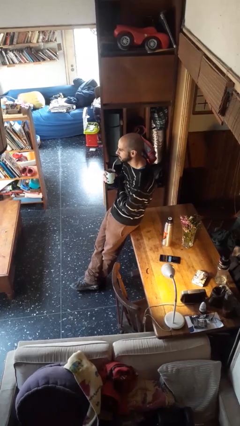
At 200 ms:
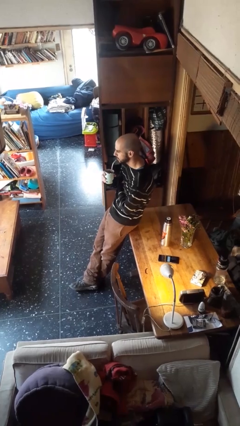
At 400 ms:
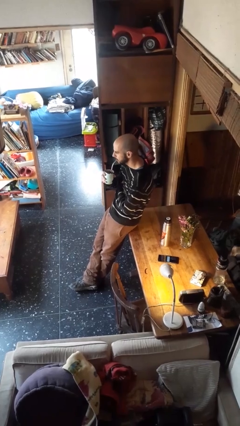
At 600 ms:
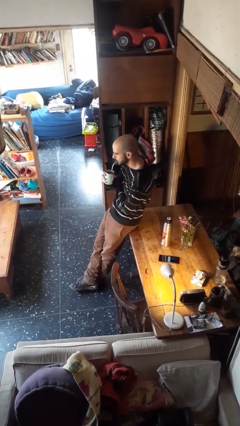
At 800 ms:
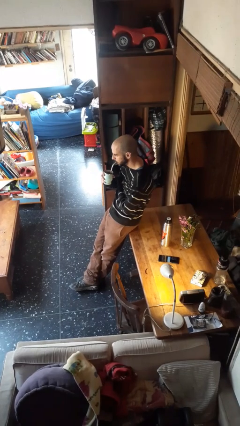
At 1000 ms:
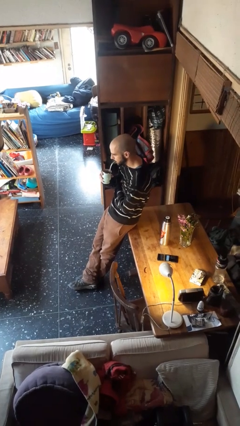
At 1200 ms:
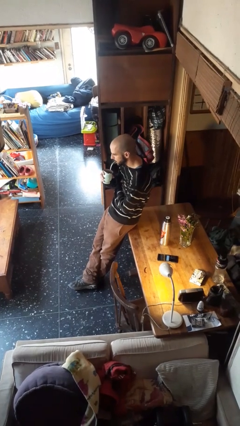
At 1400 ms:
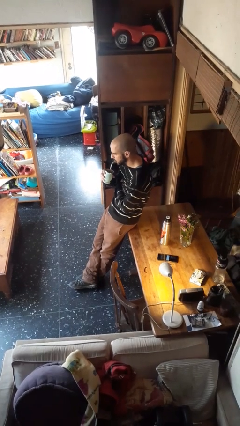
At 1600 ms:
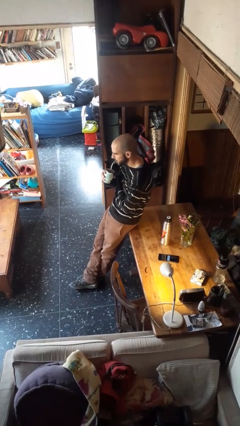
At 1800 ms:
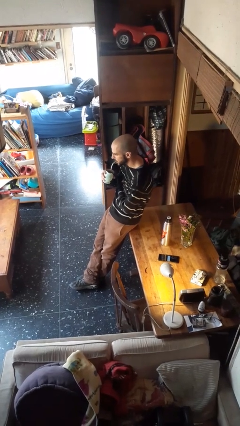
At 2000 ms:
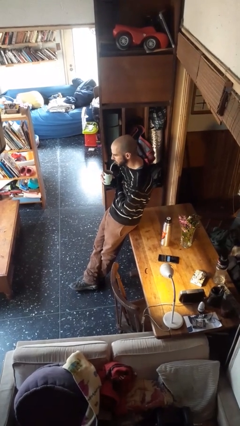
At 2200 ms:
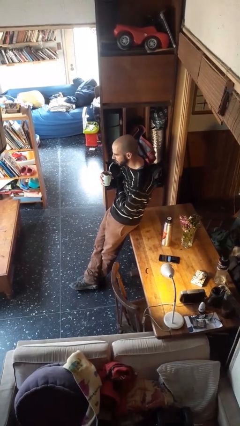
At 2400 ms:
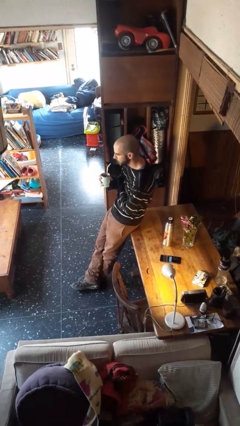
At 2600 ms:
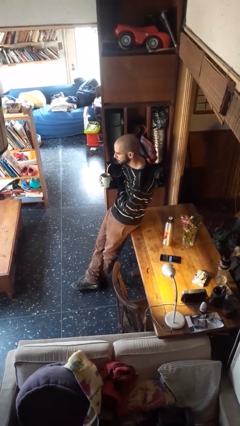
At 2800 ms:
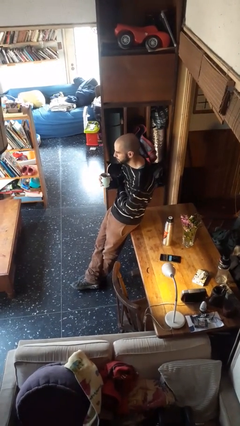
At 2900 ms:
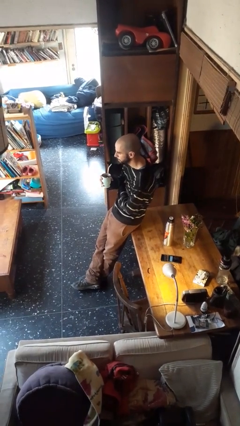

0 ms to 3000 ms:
person drinks from straw

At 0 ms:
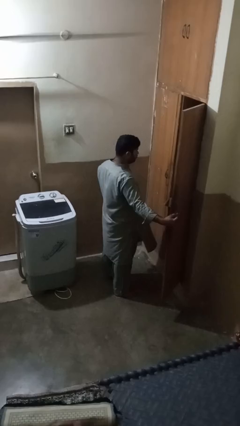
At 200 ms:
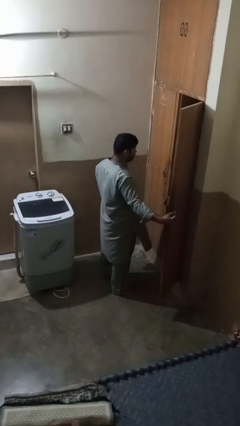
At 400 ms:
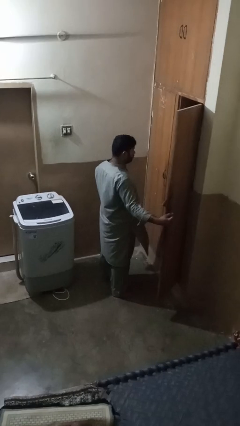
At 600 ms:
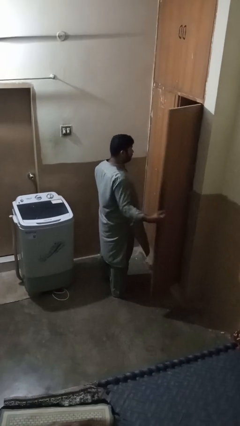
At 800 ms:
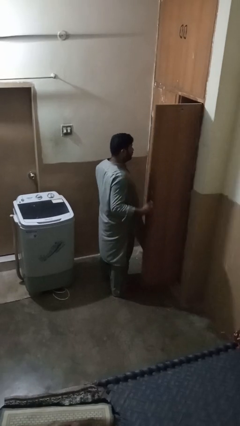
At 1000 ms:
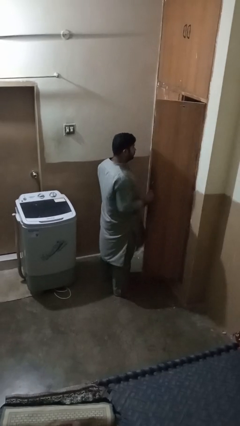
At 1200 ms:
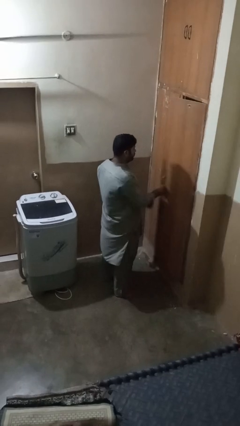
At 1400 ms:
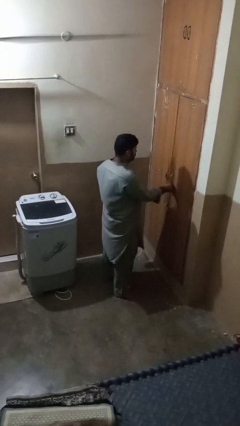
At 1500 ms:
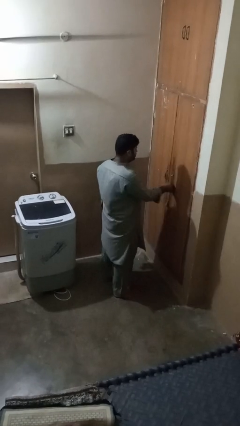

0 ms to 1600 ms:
person closes closet door

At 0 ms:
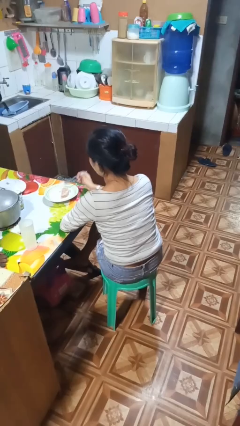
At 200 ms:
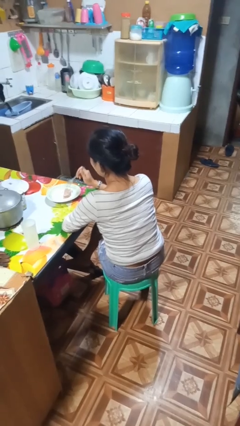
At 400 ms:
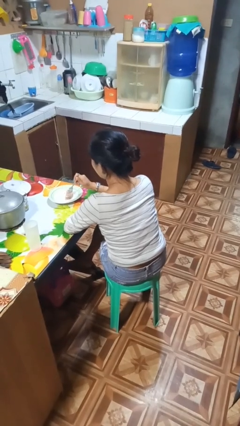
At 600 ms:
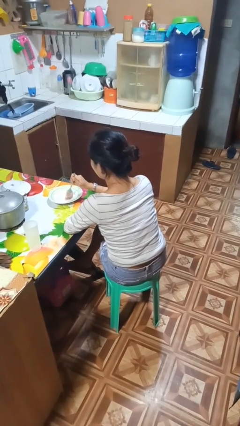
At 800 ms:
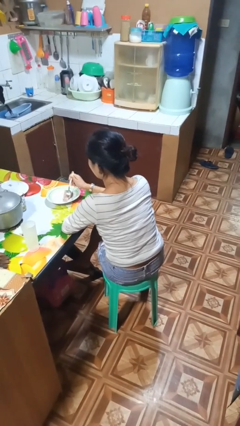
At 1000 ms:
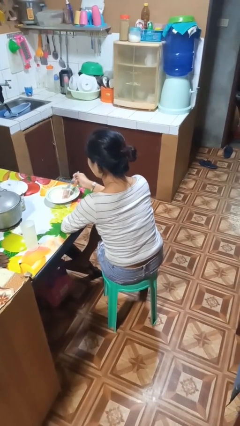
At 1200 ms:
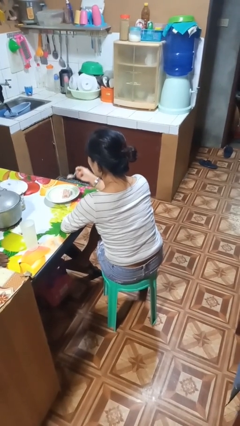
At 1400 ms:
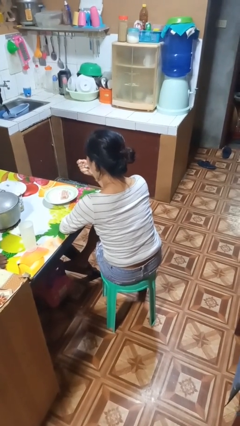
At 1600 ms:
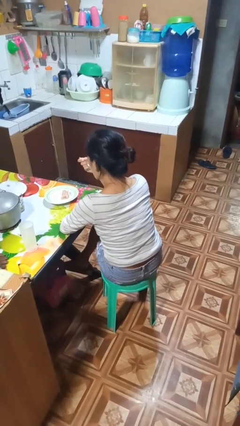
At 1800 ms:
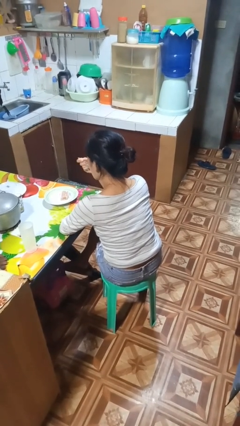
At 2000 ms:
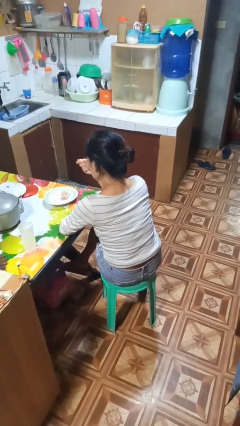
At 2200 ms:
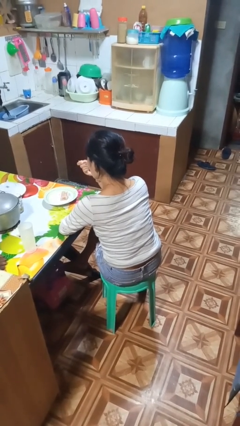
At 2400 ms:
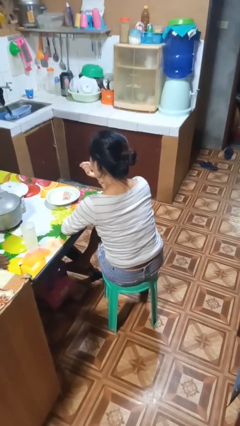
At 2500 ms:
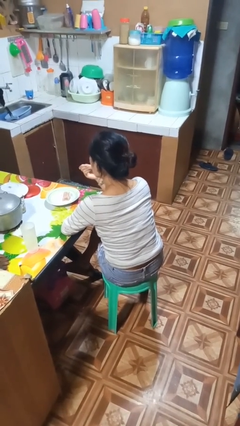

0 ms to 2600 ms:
person eats with utensil

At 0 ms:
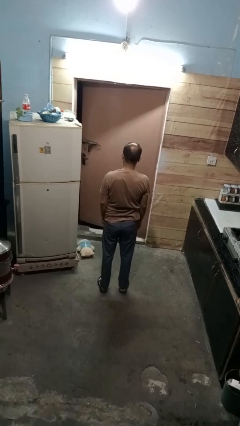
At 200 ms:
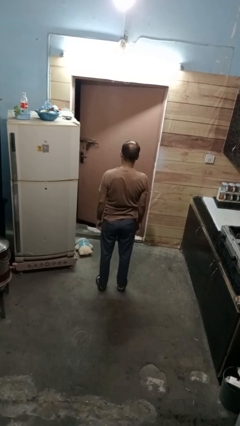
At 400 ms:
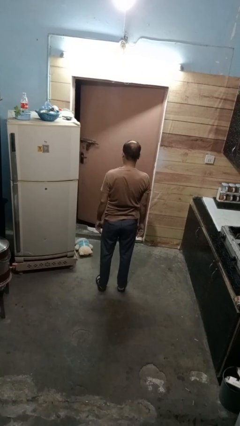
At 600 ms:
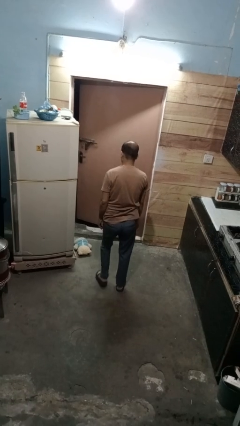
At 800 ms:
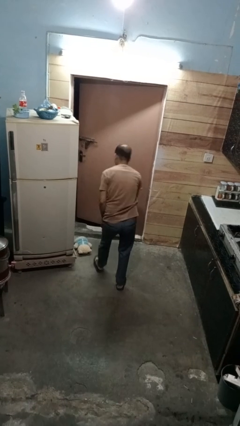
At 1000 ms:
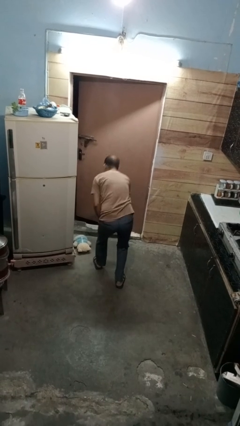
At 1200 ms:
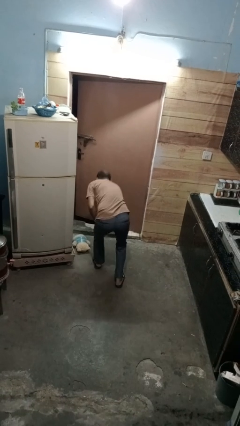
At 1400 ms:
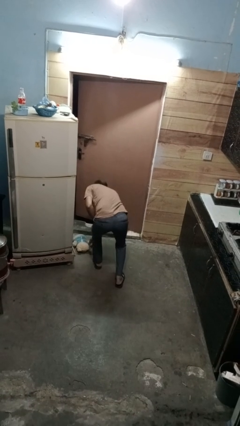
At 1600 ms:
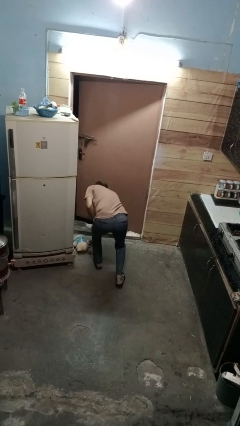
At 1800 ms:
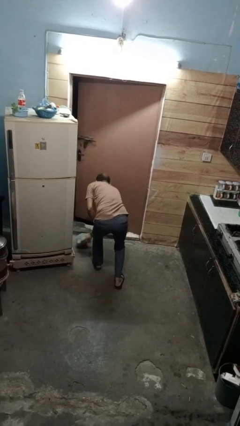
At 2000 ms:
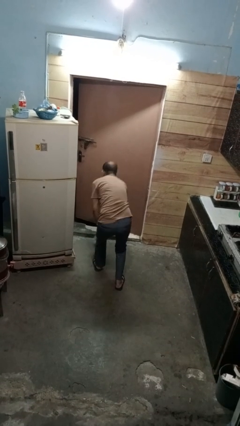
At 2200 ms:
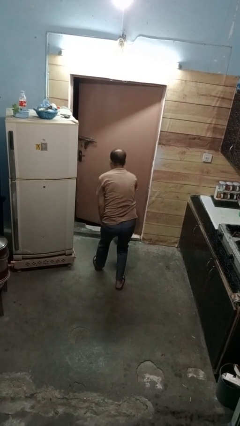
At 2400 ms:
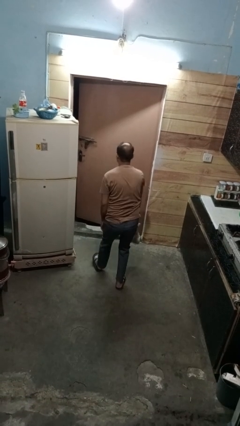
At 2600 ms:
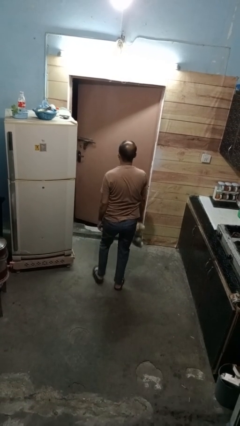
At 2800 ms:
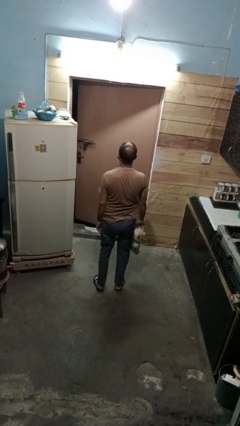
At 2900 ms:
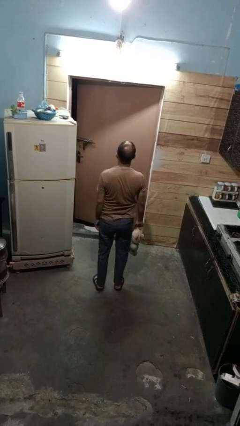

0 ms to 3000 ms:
person picks up object from floor

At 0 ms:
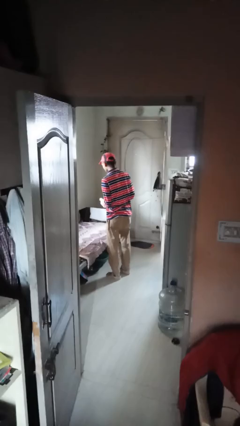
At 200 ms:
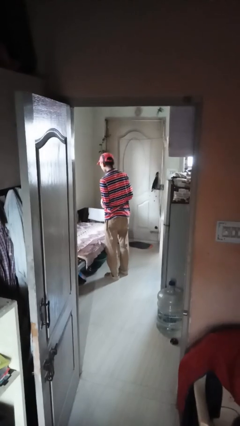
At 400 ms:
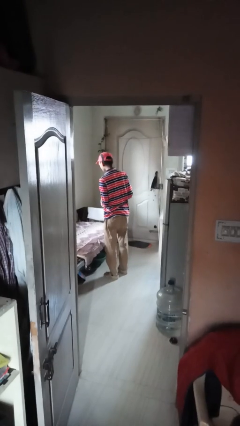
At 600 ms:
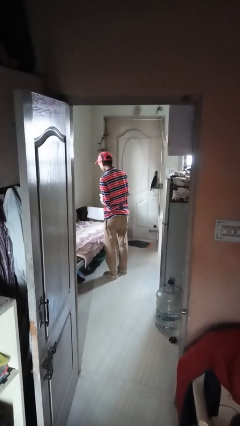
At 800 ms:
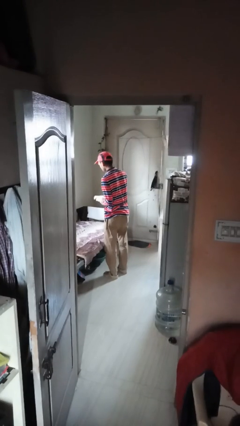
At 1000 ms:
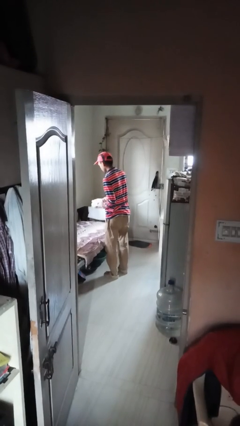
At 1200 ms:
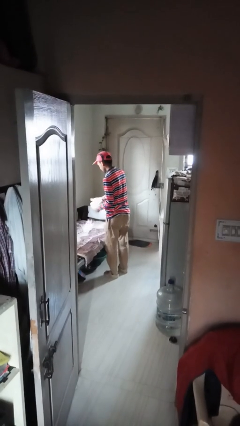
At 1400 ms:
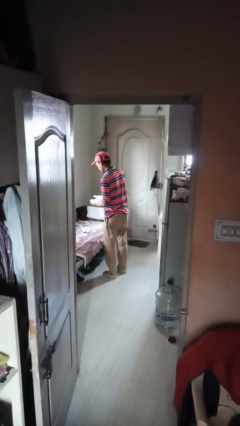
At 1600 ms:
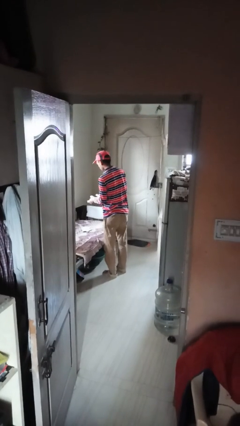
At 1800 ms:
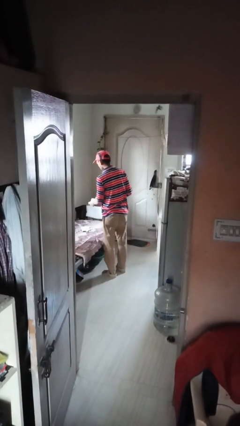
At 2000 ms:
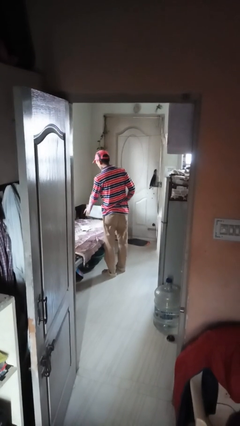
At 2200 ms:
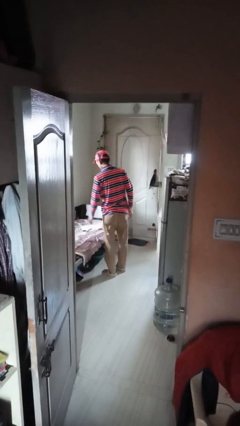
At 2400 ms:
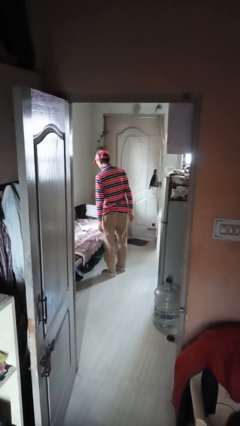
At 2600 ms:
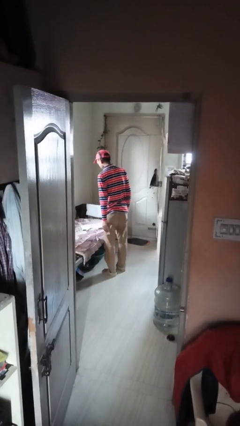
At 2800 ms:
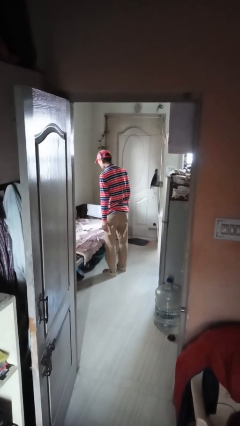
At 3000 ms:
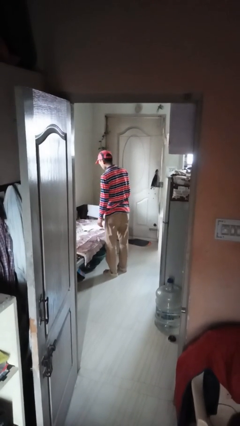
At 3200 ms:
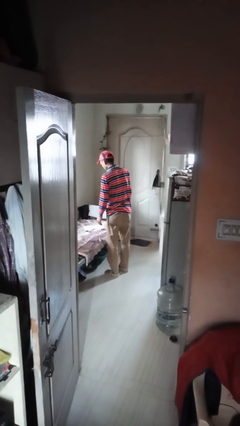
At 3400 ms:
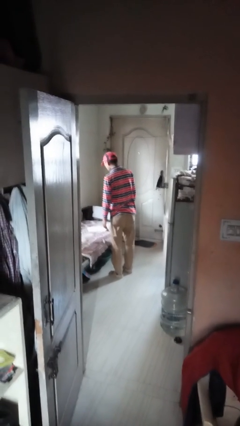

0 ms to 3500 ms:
person takes off gloves

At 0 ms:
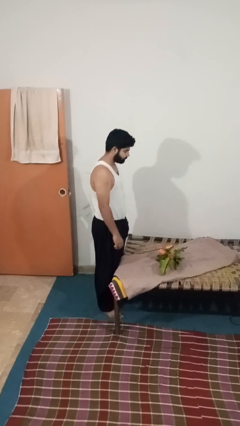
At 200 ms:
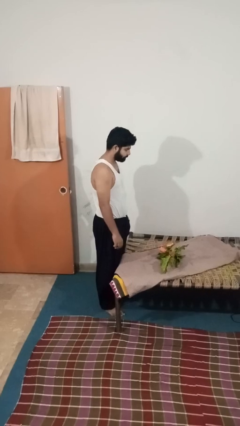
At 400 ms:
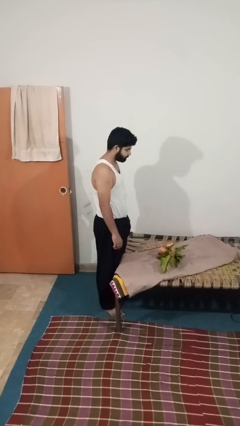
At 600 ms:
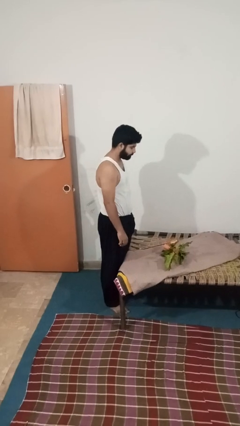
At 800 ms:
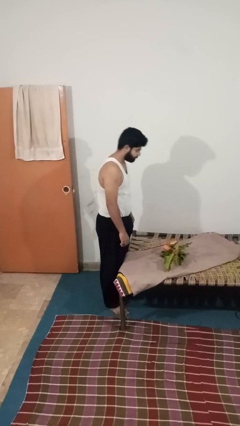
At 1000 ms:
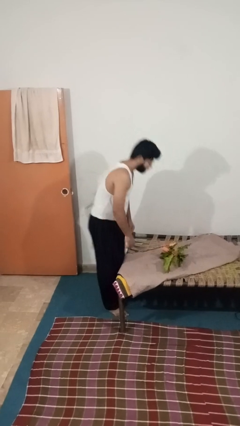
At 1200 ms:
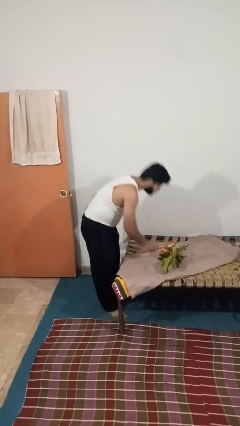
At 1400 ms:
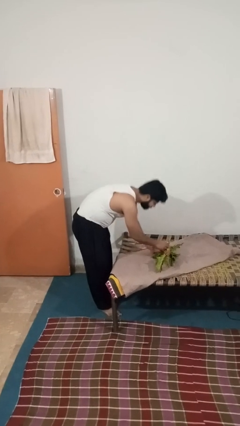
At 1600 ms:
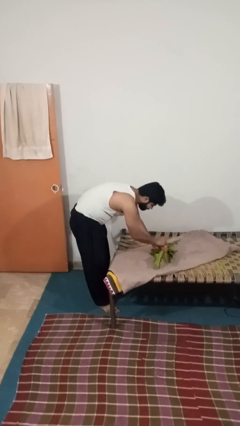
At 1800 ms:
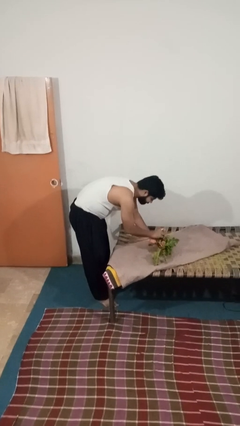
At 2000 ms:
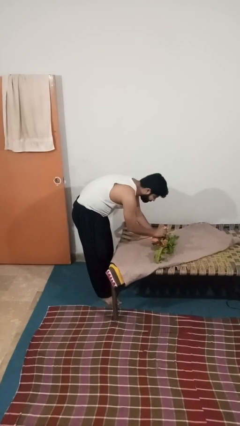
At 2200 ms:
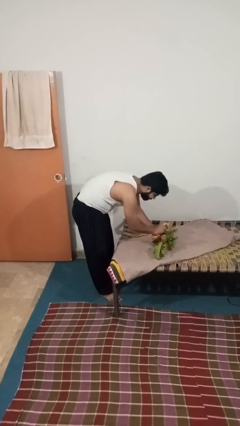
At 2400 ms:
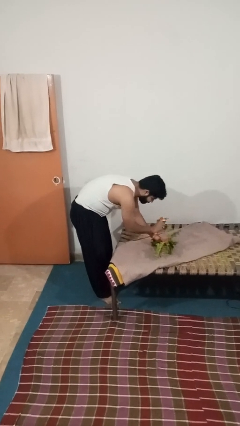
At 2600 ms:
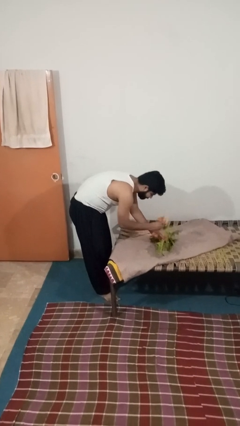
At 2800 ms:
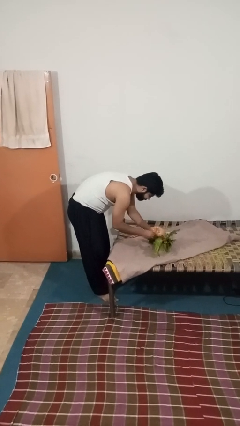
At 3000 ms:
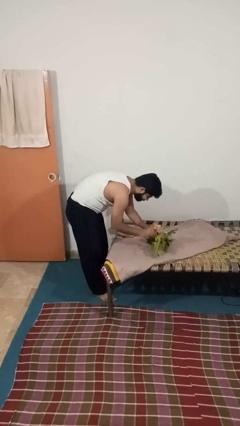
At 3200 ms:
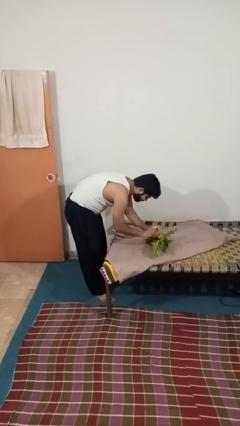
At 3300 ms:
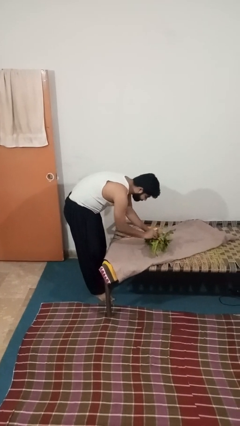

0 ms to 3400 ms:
person climbs off chair

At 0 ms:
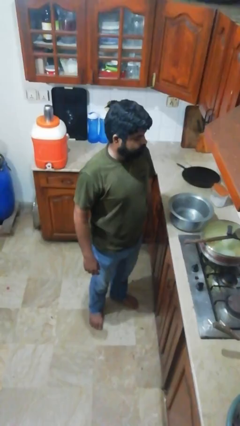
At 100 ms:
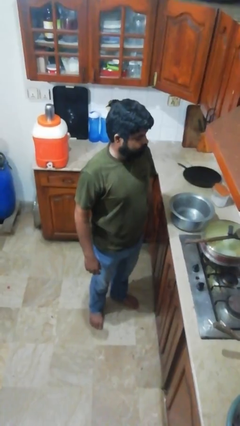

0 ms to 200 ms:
person burns hand
